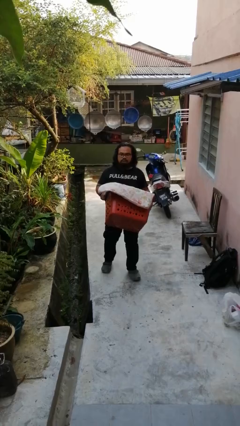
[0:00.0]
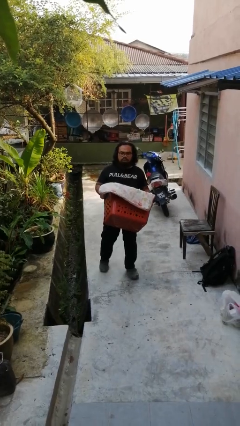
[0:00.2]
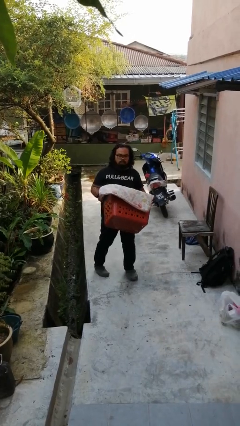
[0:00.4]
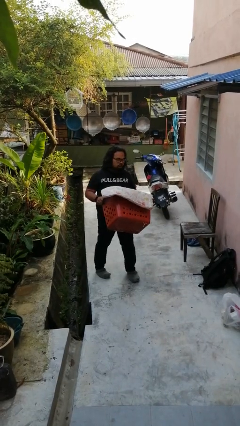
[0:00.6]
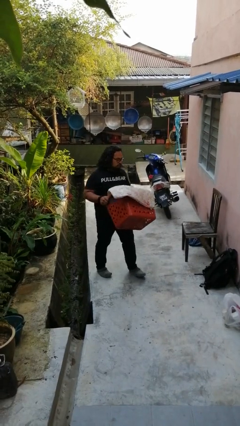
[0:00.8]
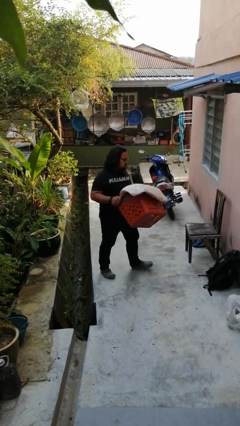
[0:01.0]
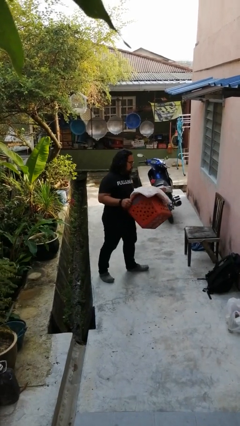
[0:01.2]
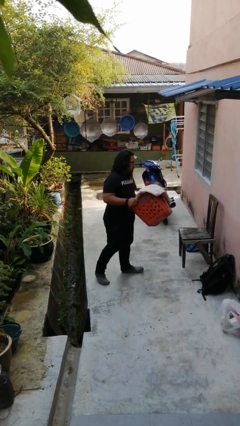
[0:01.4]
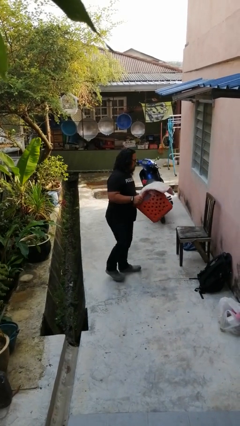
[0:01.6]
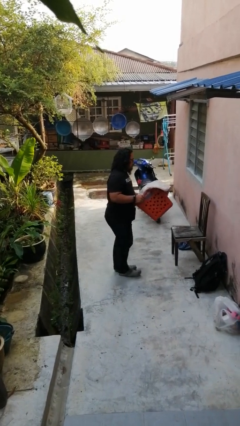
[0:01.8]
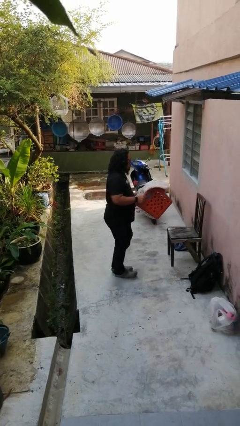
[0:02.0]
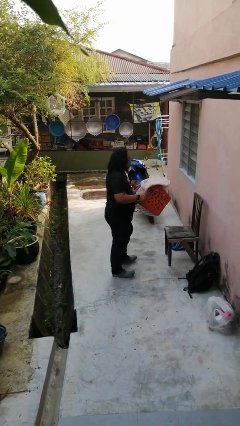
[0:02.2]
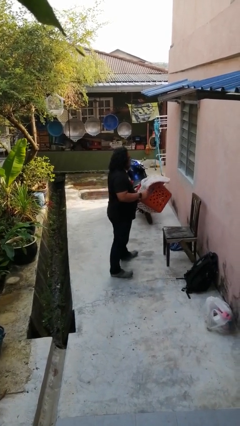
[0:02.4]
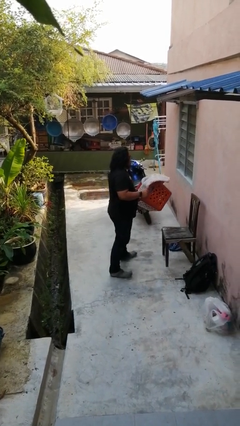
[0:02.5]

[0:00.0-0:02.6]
person carries laundry basket

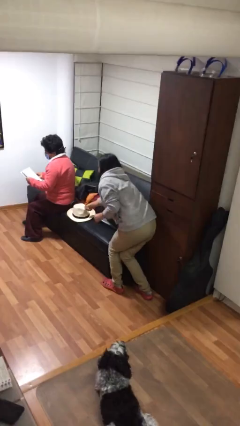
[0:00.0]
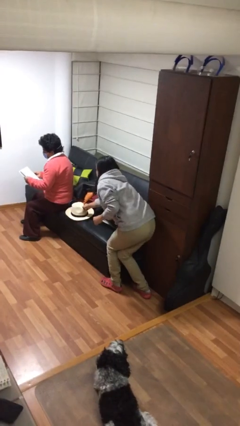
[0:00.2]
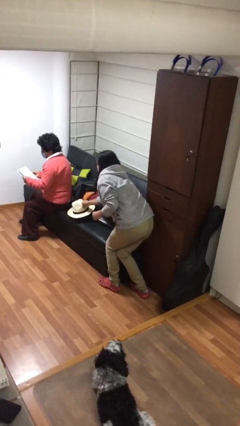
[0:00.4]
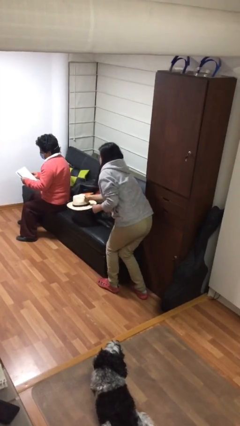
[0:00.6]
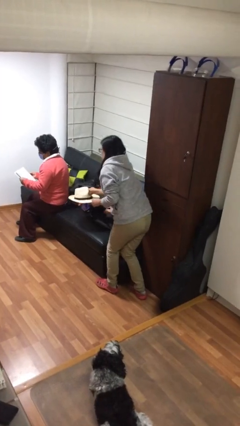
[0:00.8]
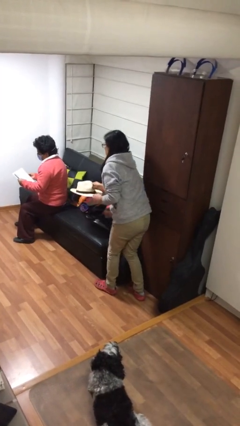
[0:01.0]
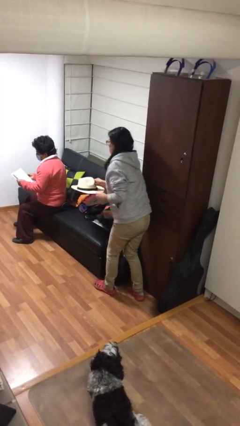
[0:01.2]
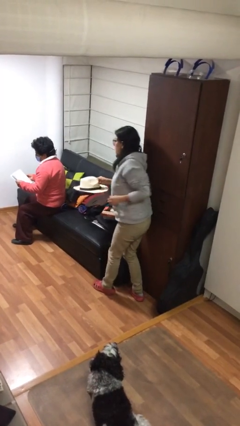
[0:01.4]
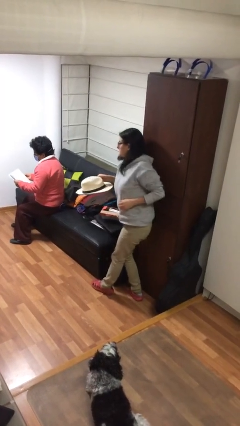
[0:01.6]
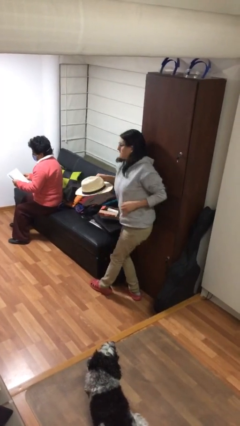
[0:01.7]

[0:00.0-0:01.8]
person steals object from person

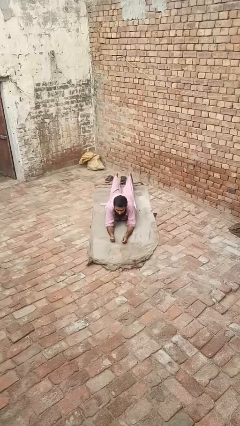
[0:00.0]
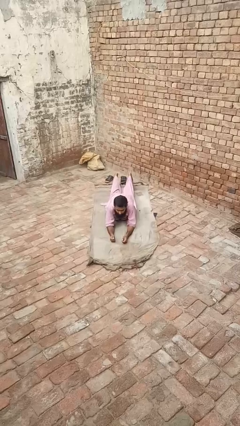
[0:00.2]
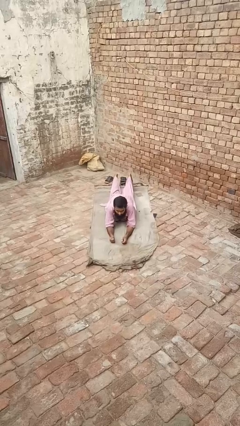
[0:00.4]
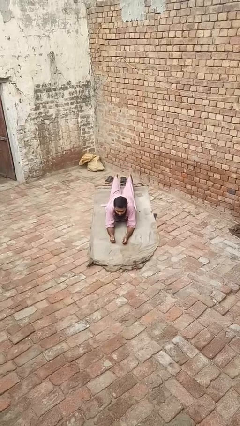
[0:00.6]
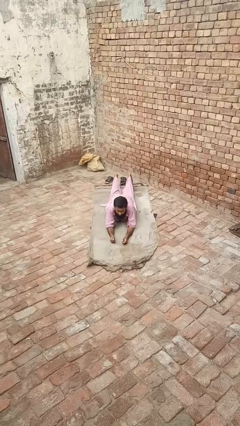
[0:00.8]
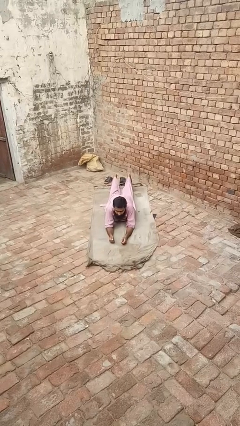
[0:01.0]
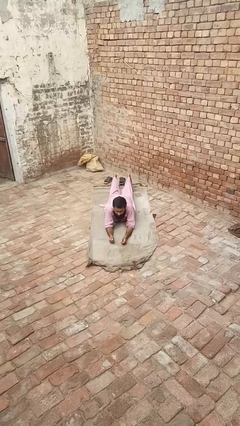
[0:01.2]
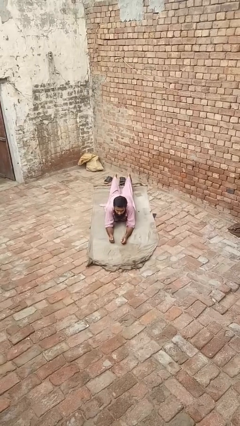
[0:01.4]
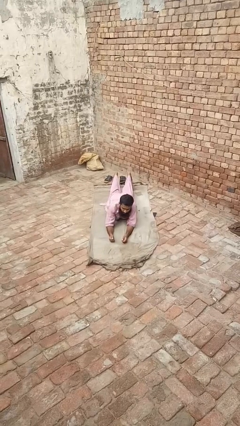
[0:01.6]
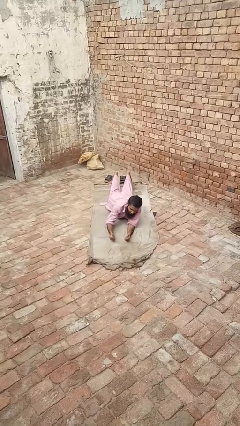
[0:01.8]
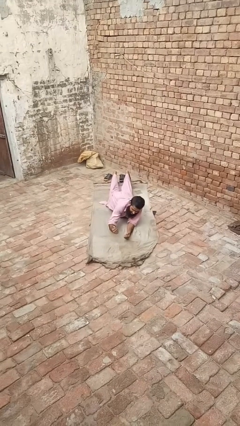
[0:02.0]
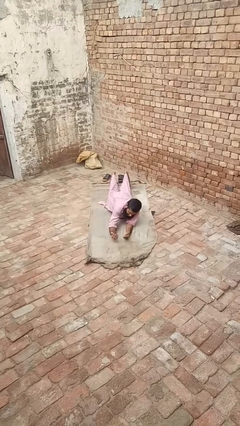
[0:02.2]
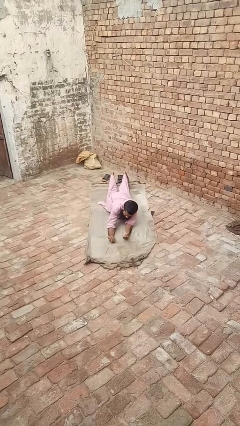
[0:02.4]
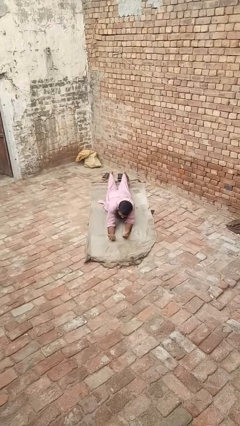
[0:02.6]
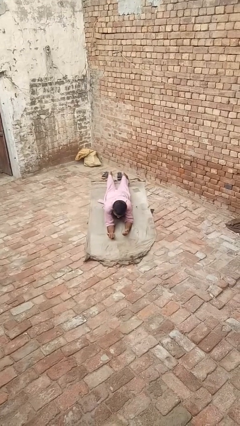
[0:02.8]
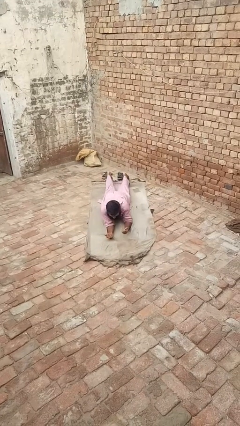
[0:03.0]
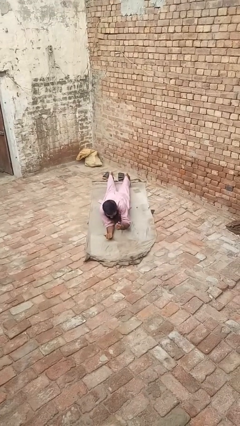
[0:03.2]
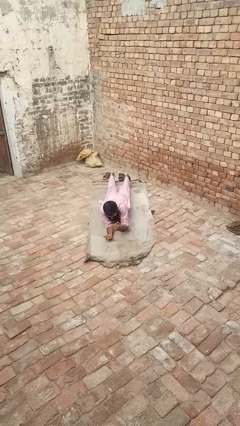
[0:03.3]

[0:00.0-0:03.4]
person crawls

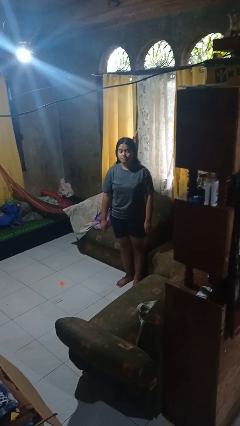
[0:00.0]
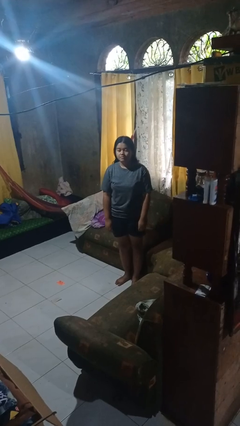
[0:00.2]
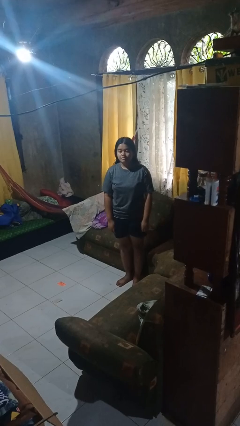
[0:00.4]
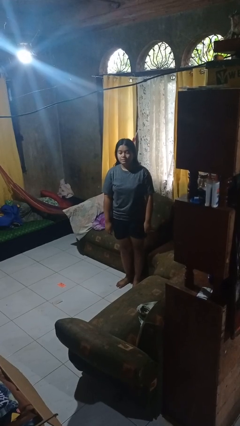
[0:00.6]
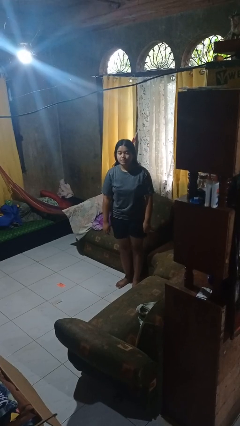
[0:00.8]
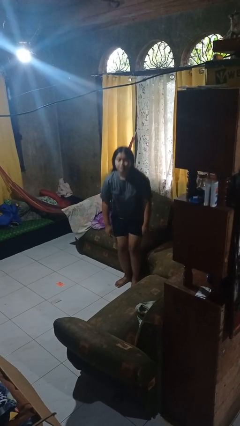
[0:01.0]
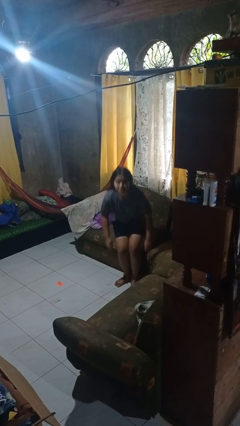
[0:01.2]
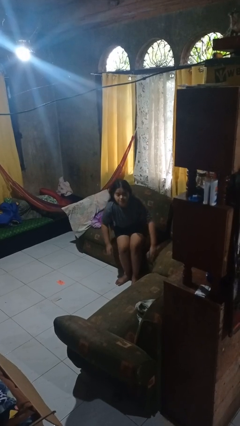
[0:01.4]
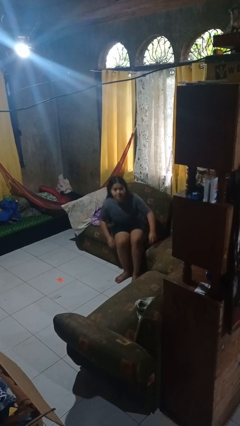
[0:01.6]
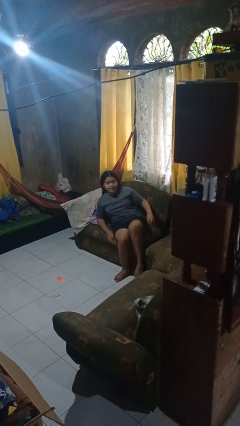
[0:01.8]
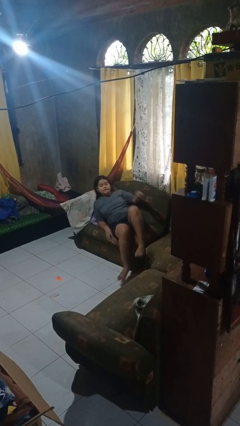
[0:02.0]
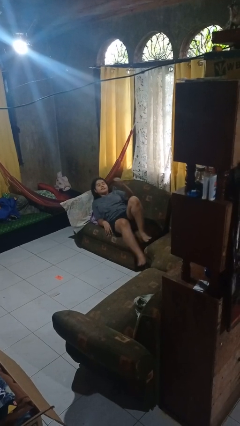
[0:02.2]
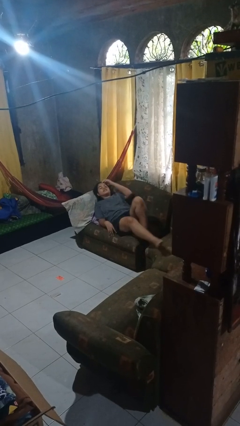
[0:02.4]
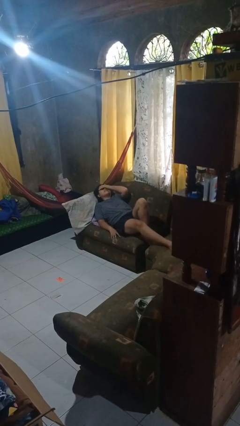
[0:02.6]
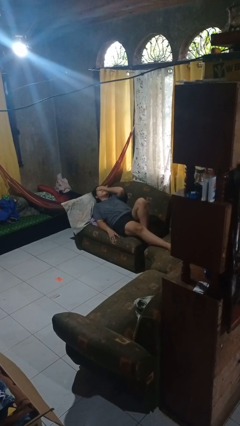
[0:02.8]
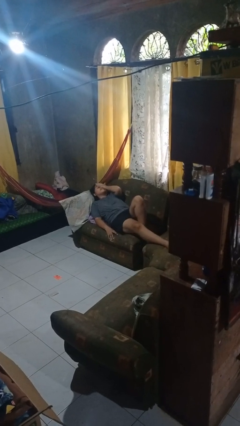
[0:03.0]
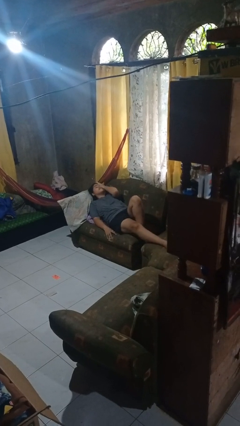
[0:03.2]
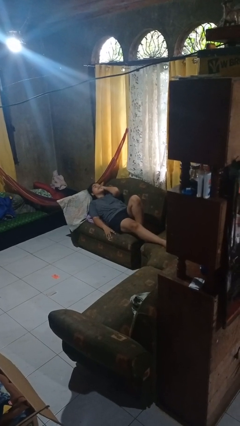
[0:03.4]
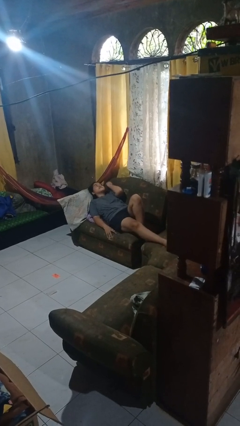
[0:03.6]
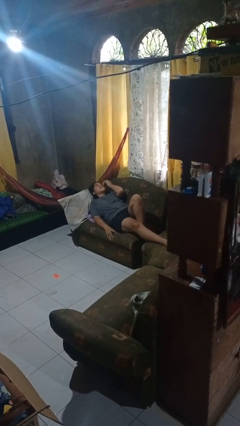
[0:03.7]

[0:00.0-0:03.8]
person lies down on couch

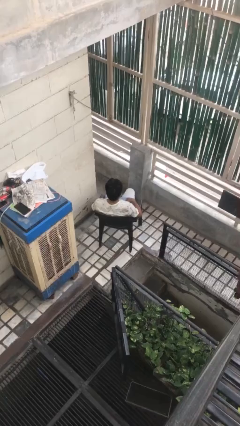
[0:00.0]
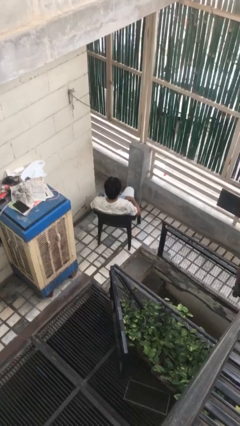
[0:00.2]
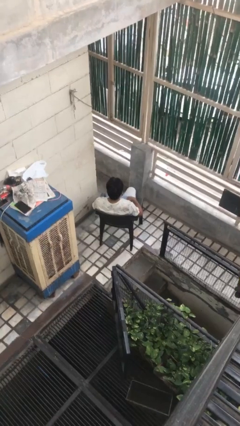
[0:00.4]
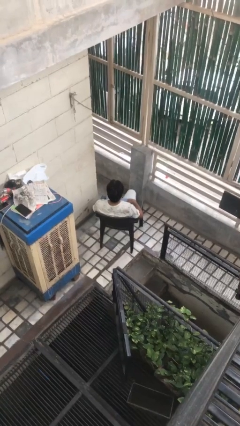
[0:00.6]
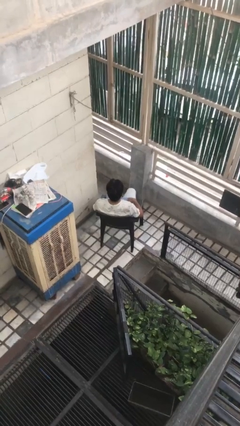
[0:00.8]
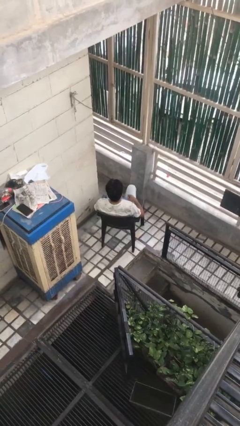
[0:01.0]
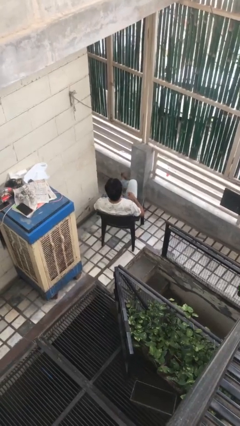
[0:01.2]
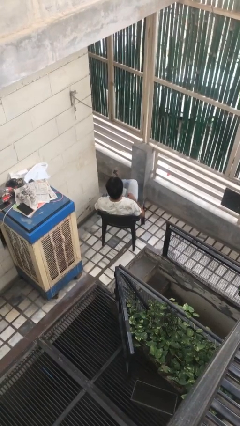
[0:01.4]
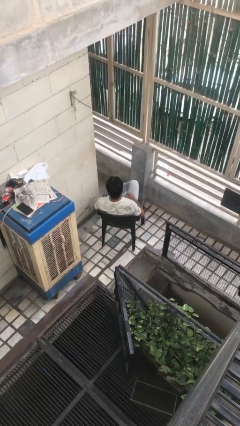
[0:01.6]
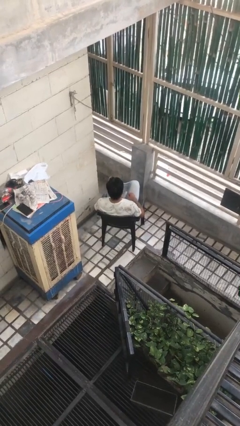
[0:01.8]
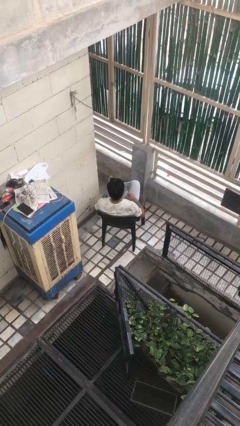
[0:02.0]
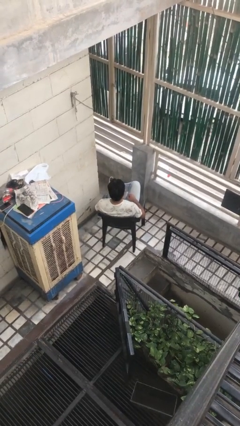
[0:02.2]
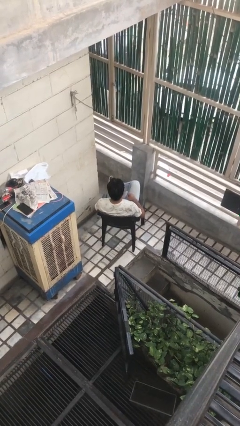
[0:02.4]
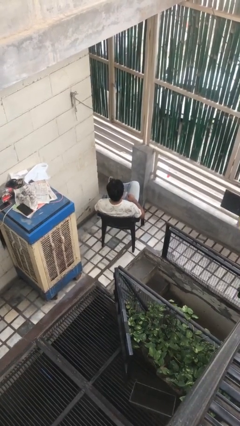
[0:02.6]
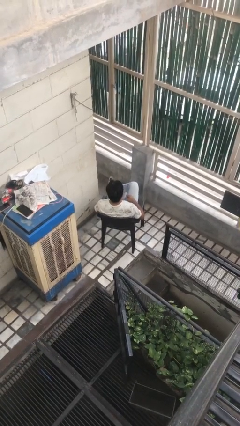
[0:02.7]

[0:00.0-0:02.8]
person crosses legs

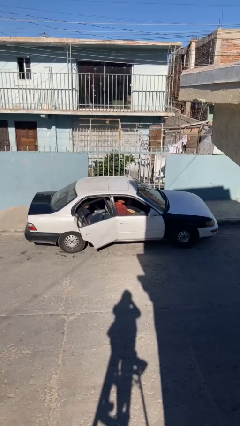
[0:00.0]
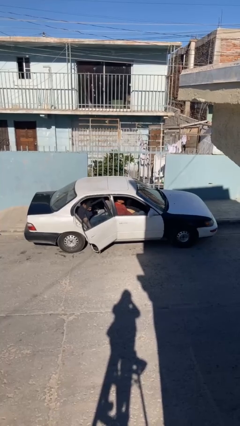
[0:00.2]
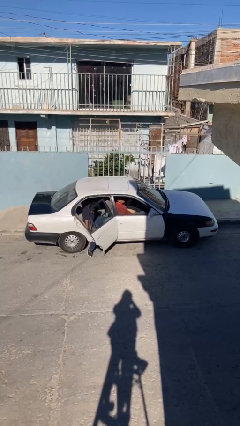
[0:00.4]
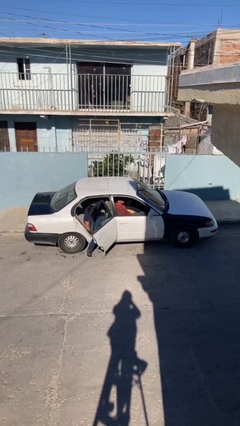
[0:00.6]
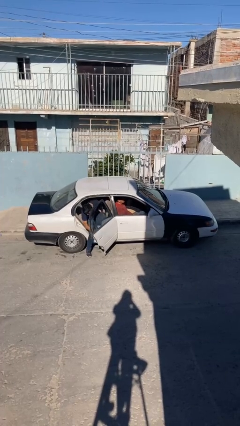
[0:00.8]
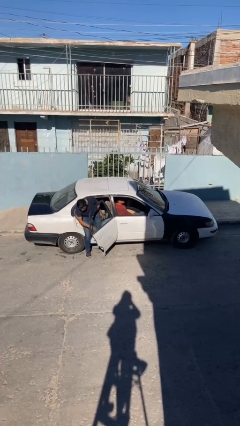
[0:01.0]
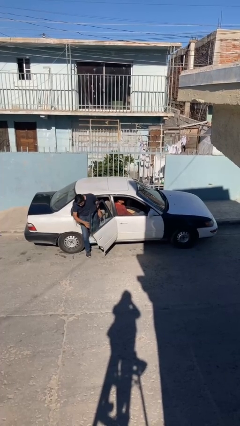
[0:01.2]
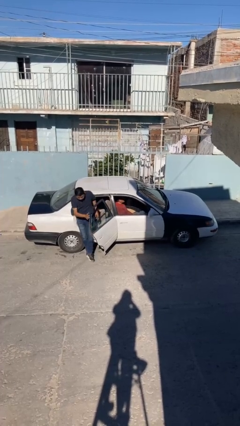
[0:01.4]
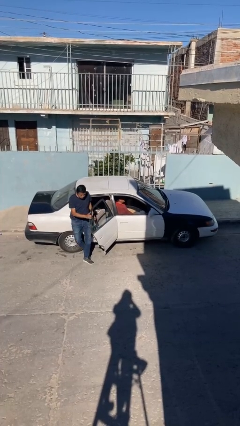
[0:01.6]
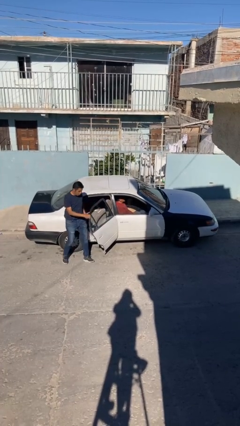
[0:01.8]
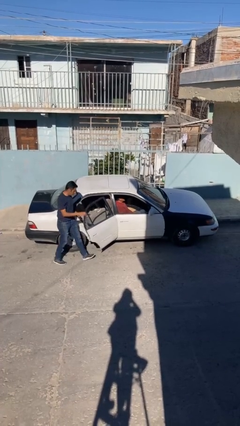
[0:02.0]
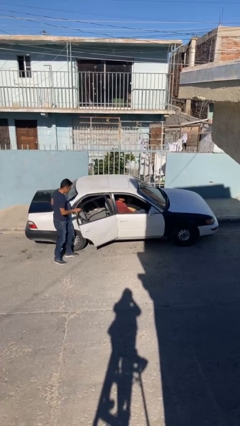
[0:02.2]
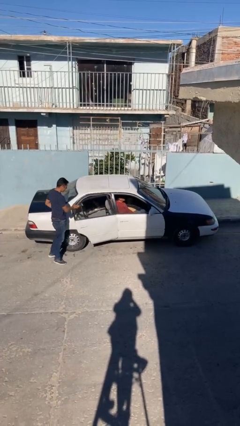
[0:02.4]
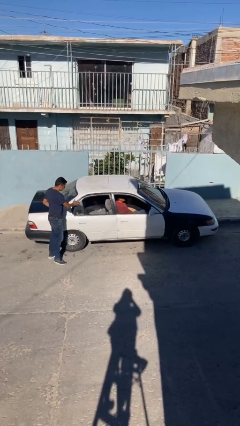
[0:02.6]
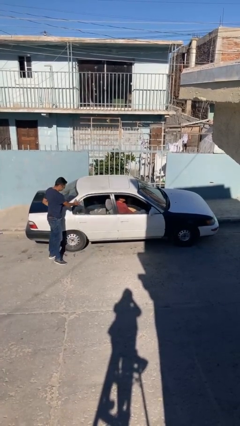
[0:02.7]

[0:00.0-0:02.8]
car drops off person

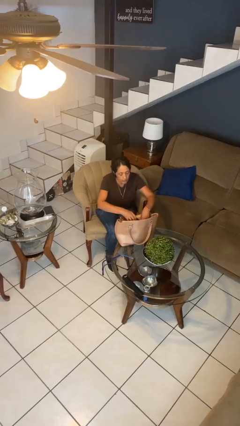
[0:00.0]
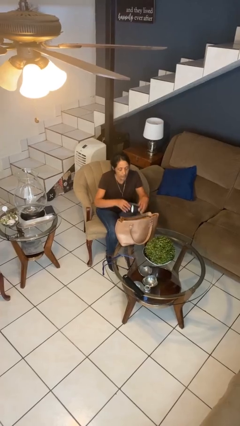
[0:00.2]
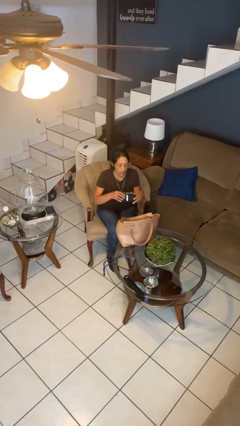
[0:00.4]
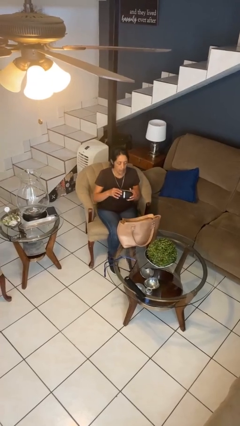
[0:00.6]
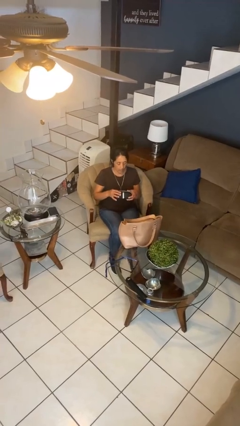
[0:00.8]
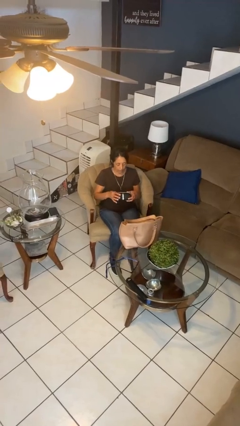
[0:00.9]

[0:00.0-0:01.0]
person takes object from purse
